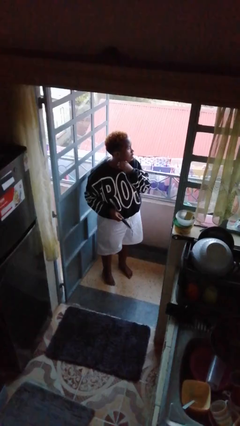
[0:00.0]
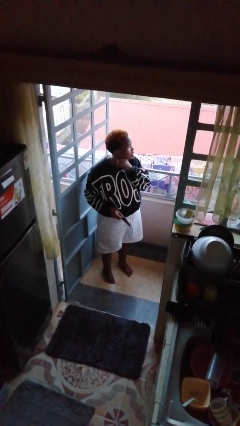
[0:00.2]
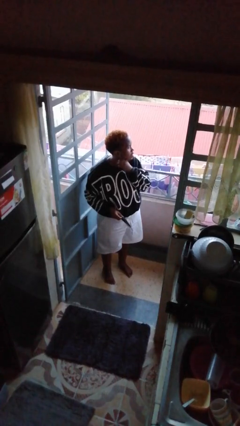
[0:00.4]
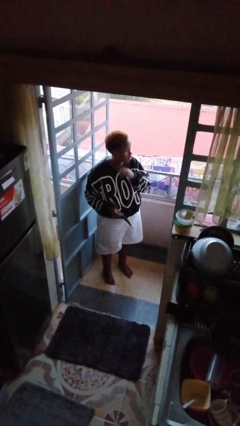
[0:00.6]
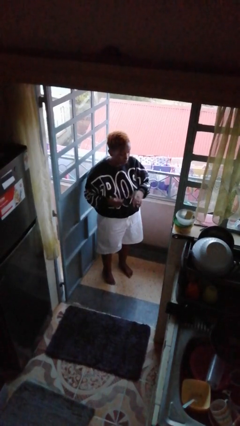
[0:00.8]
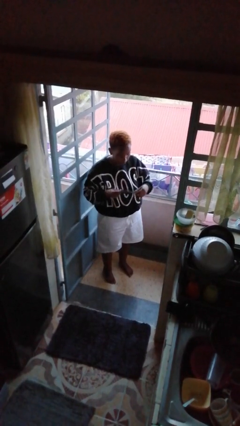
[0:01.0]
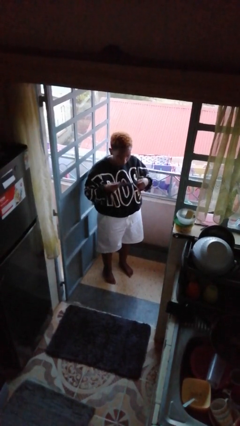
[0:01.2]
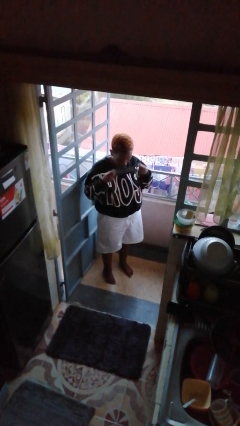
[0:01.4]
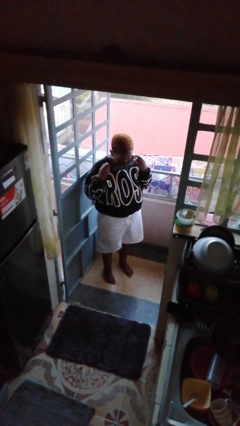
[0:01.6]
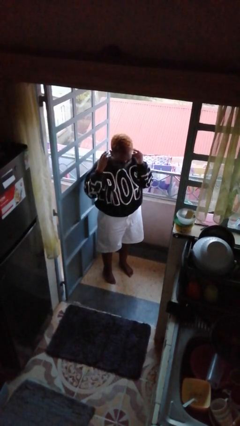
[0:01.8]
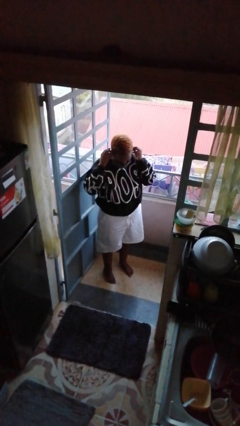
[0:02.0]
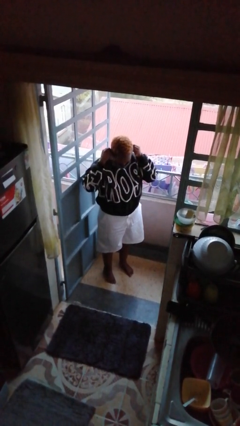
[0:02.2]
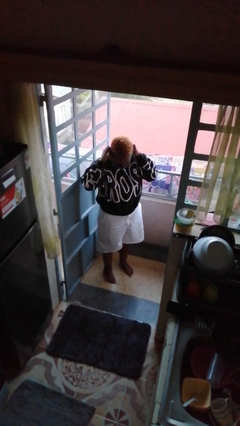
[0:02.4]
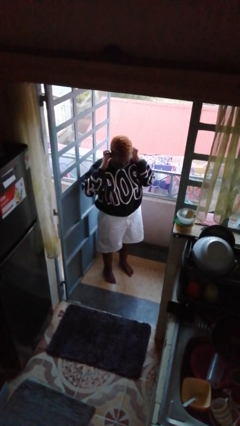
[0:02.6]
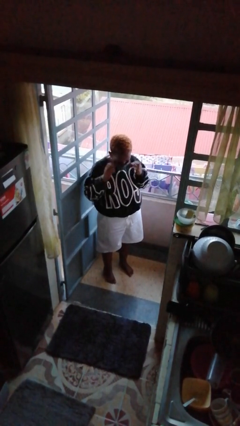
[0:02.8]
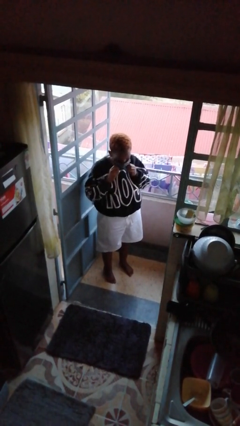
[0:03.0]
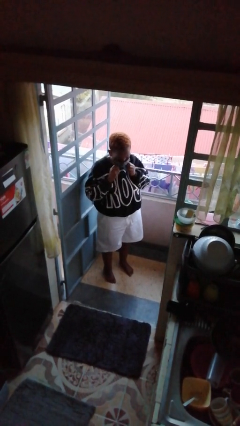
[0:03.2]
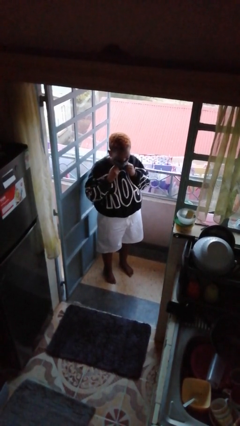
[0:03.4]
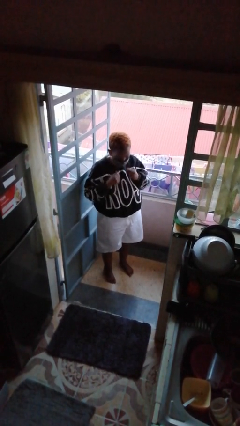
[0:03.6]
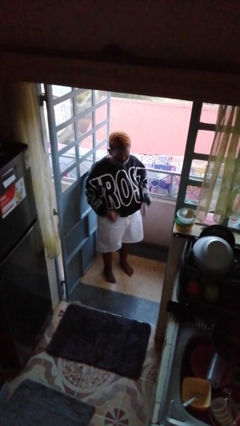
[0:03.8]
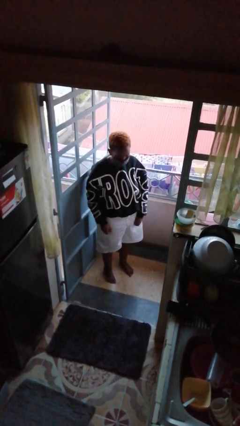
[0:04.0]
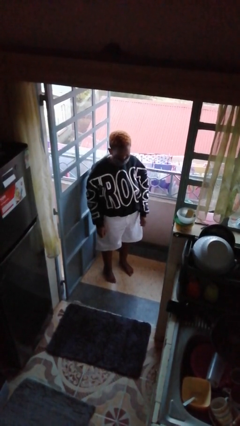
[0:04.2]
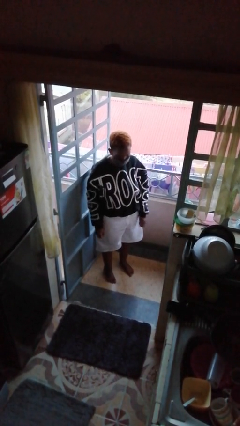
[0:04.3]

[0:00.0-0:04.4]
person puts on facemask

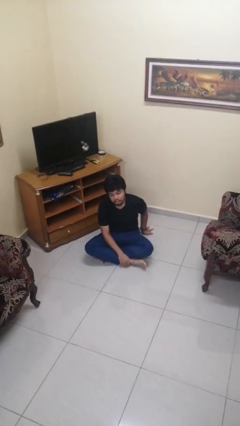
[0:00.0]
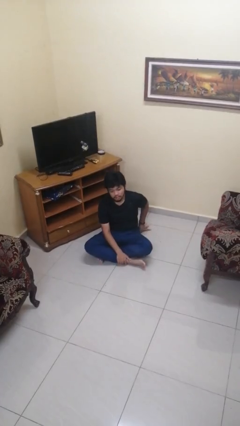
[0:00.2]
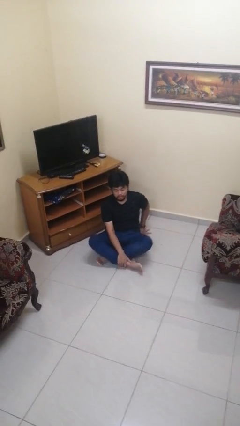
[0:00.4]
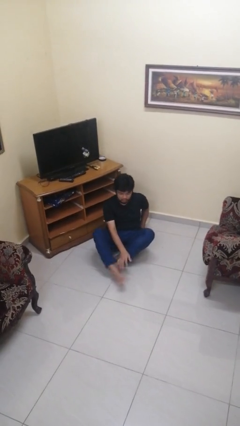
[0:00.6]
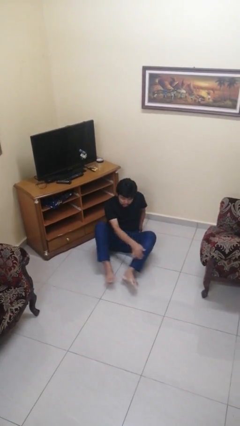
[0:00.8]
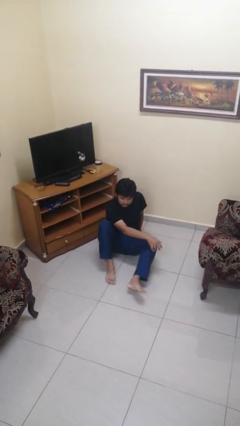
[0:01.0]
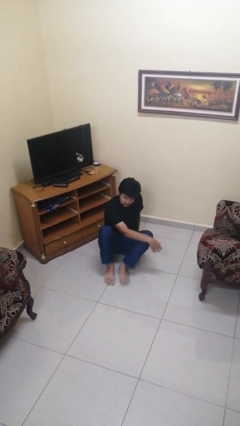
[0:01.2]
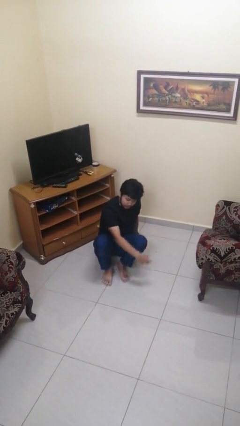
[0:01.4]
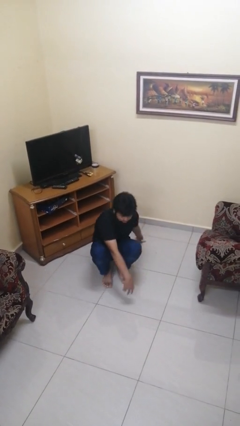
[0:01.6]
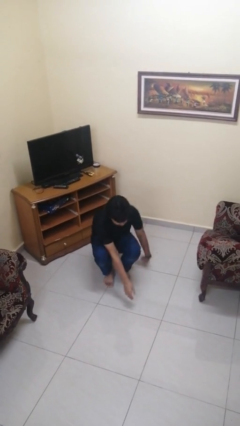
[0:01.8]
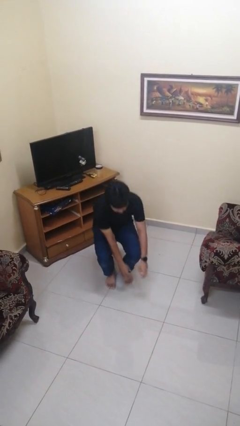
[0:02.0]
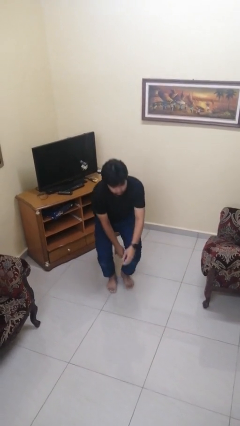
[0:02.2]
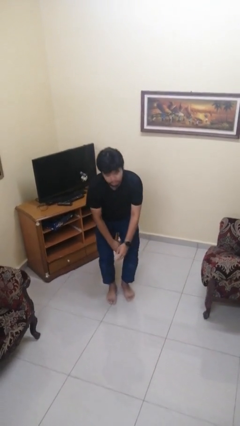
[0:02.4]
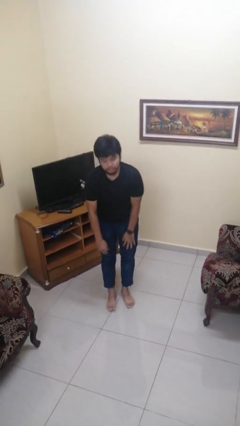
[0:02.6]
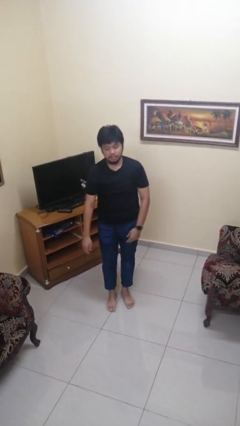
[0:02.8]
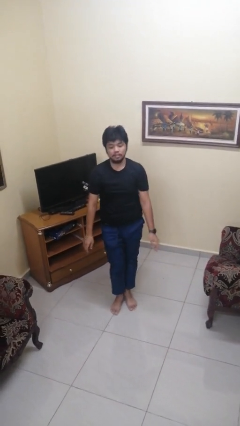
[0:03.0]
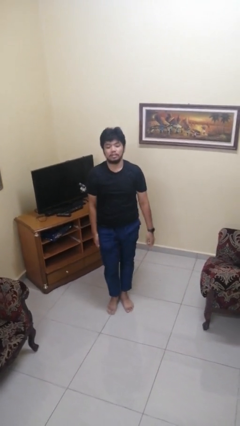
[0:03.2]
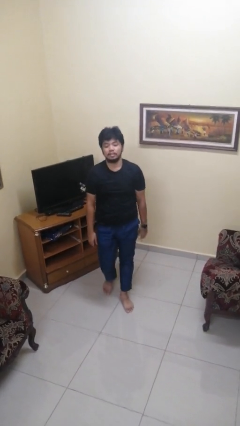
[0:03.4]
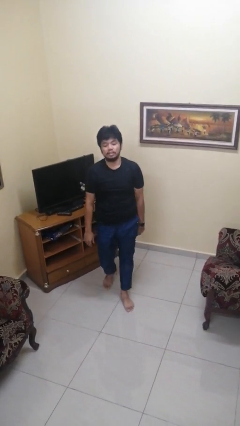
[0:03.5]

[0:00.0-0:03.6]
person stands up from floor

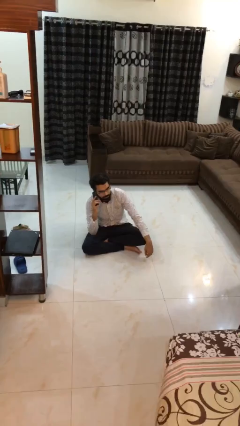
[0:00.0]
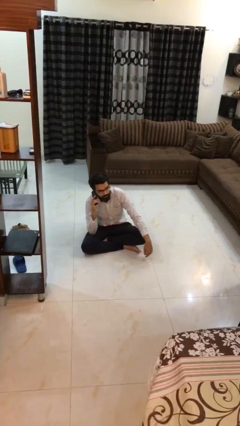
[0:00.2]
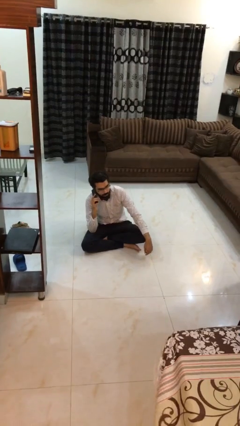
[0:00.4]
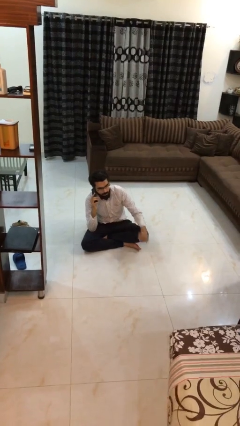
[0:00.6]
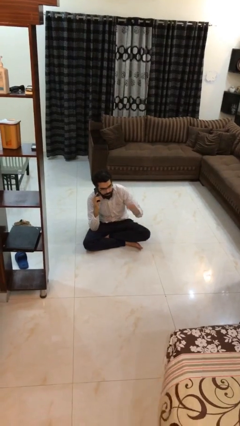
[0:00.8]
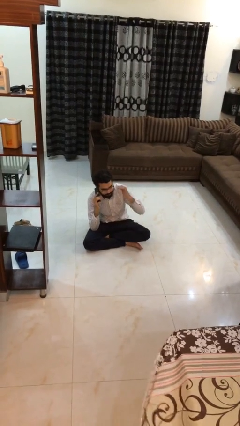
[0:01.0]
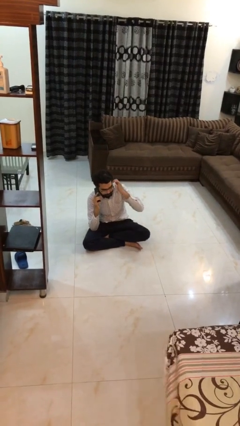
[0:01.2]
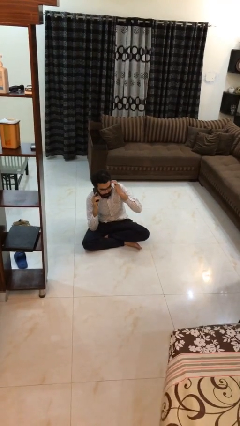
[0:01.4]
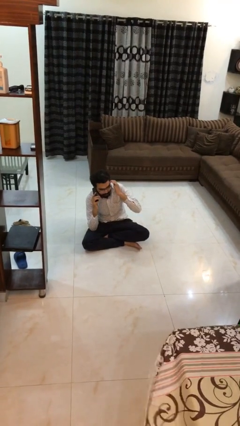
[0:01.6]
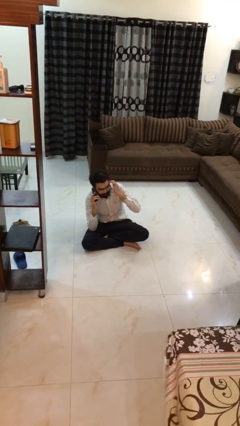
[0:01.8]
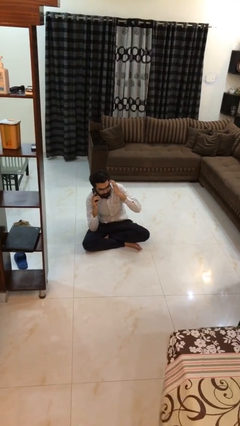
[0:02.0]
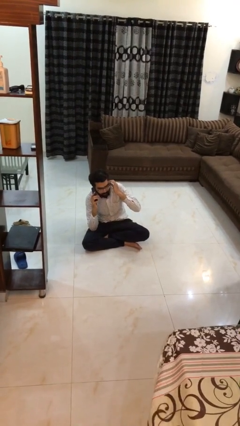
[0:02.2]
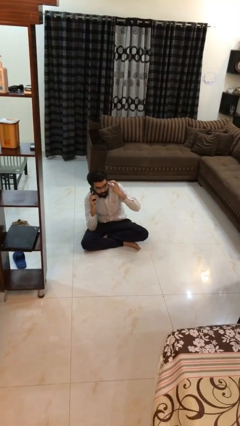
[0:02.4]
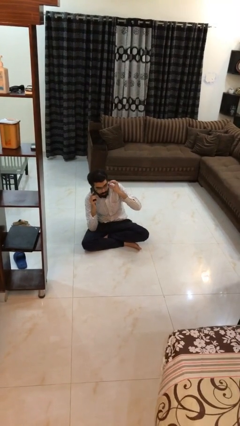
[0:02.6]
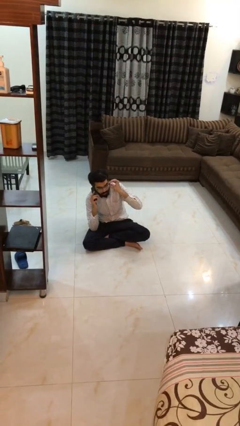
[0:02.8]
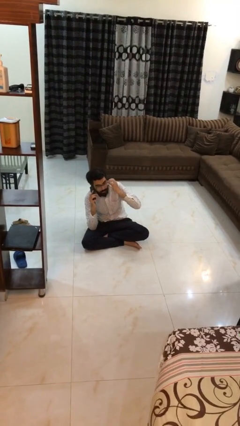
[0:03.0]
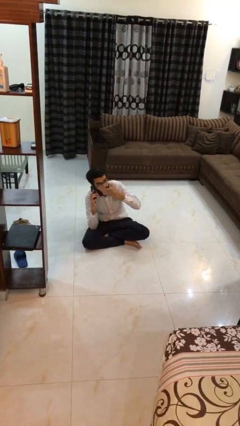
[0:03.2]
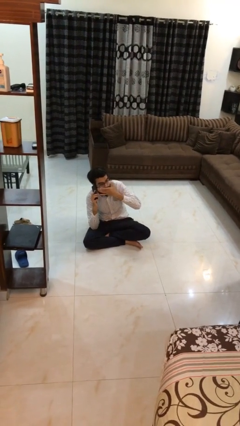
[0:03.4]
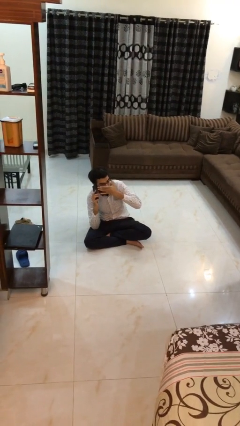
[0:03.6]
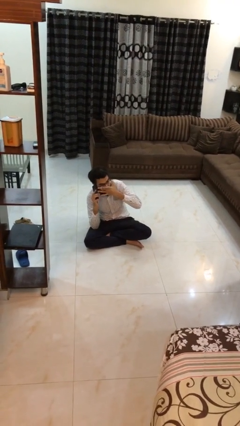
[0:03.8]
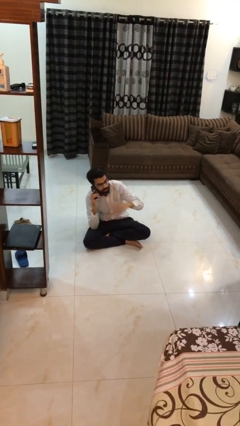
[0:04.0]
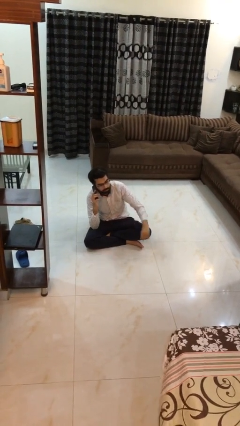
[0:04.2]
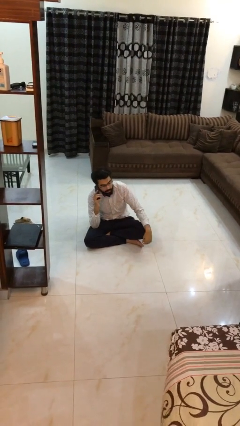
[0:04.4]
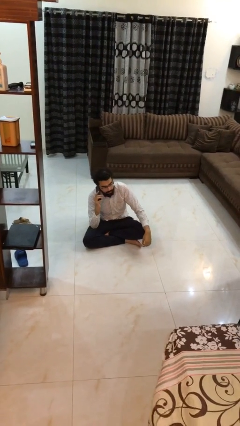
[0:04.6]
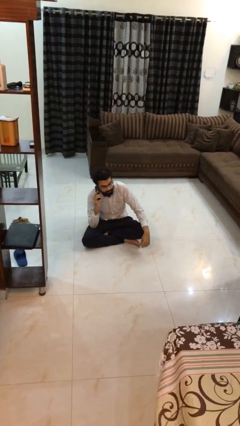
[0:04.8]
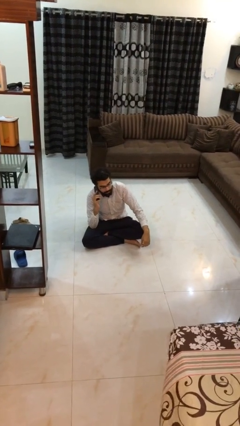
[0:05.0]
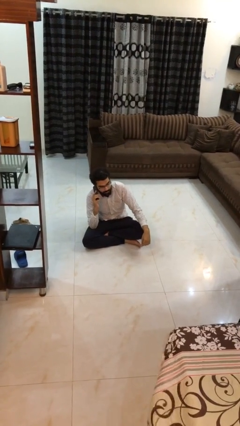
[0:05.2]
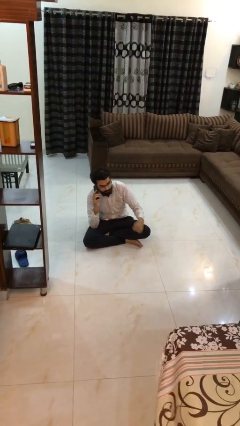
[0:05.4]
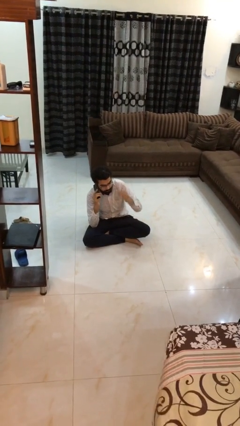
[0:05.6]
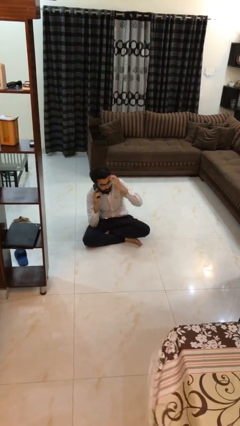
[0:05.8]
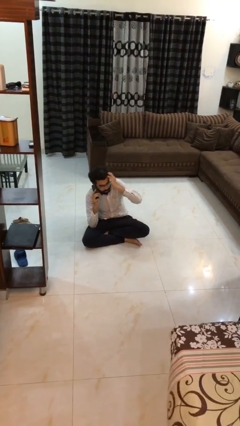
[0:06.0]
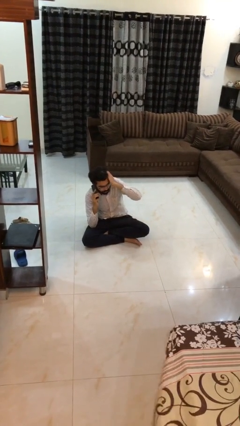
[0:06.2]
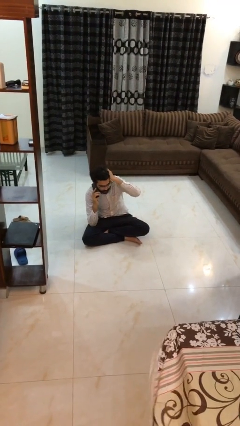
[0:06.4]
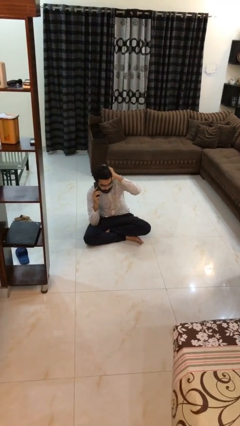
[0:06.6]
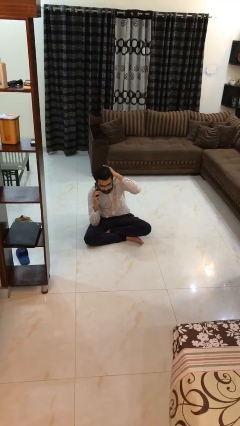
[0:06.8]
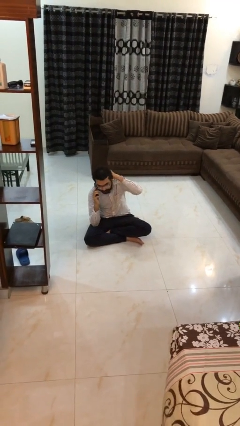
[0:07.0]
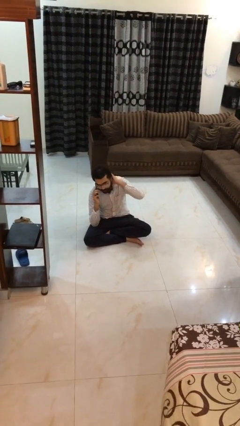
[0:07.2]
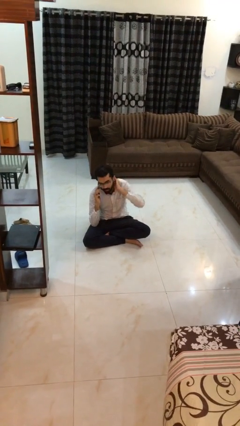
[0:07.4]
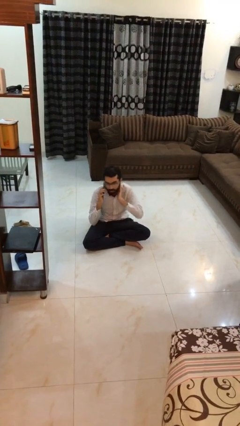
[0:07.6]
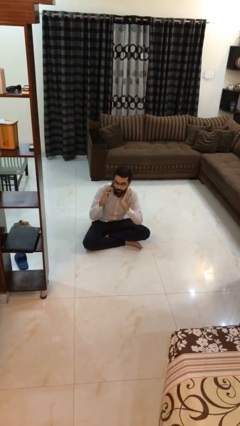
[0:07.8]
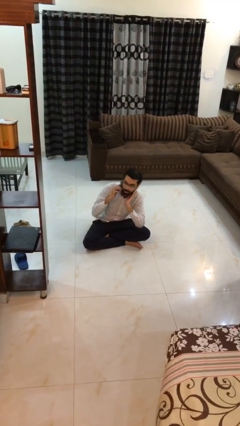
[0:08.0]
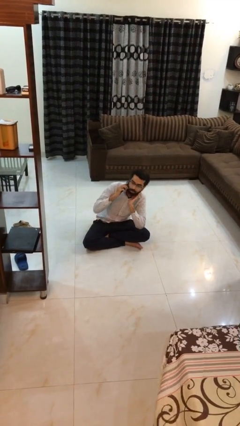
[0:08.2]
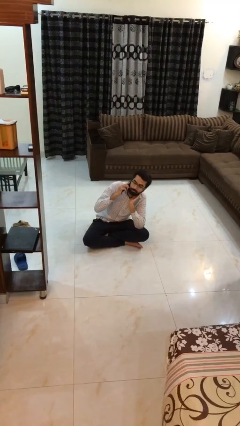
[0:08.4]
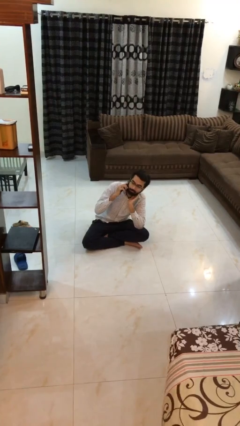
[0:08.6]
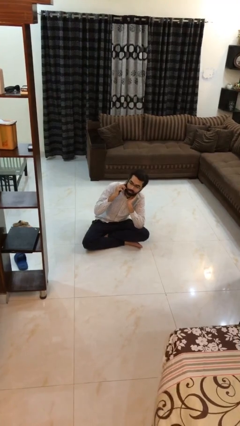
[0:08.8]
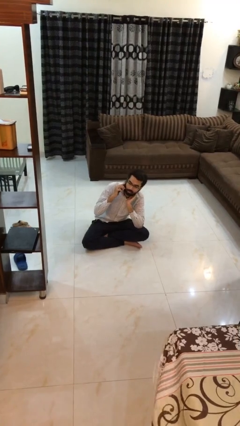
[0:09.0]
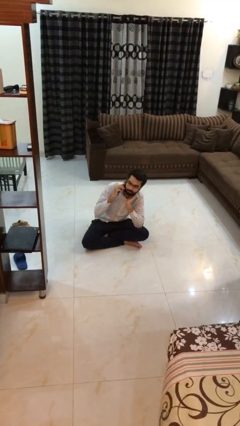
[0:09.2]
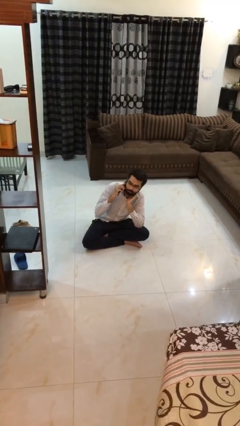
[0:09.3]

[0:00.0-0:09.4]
person talks on phone

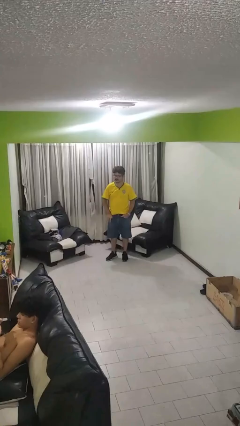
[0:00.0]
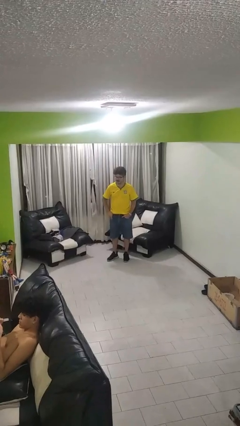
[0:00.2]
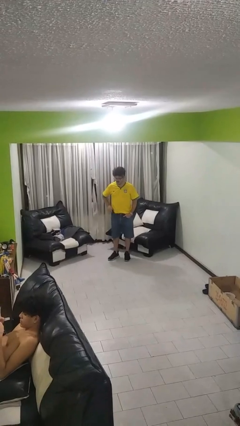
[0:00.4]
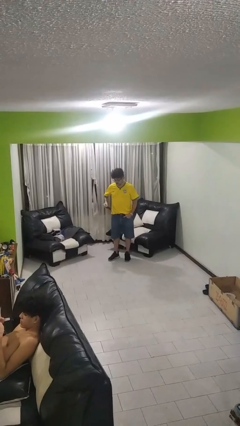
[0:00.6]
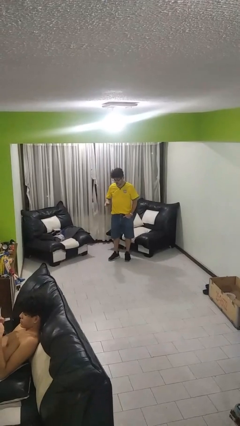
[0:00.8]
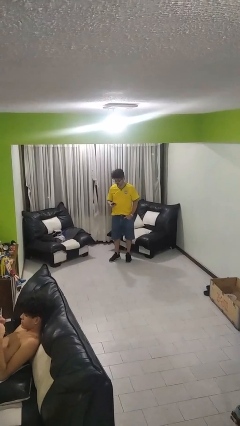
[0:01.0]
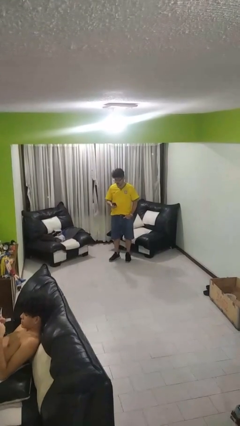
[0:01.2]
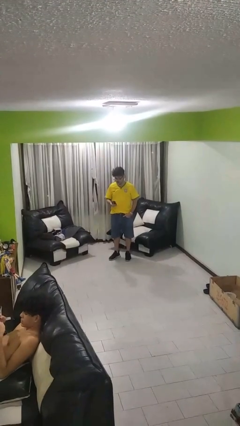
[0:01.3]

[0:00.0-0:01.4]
person takes phone from pocket
